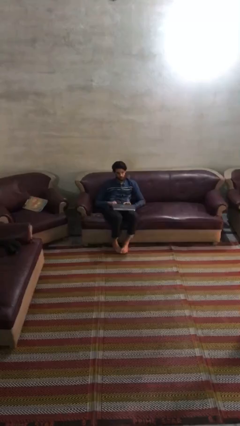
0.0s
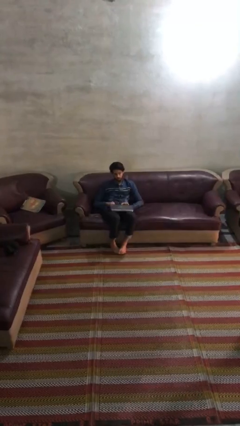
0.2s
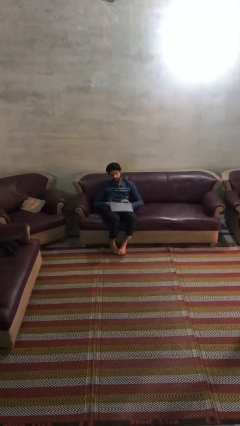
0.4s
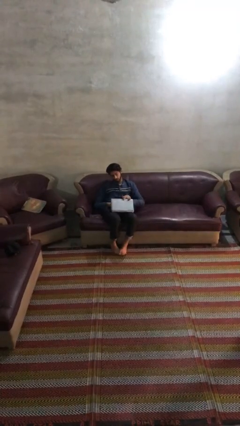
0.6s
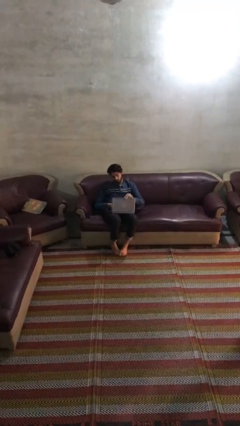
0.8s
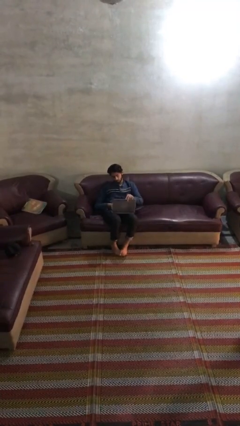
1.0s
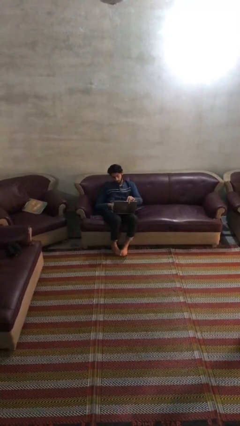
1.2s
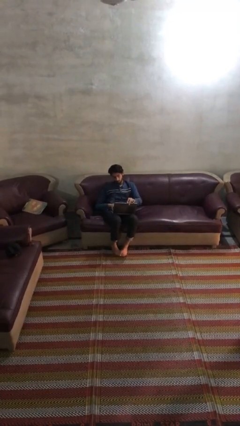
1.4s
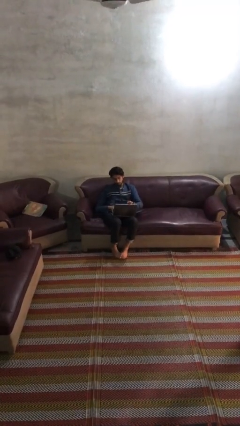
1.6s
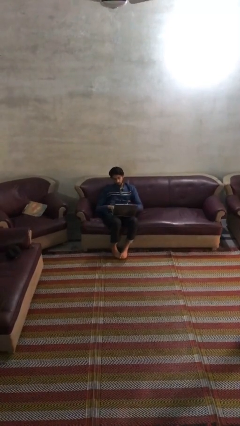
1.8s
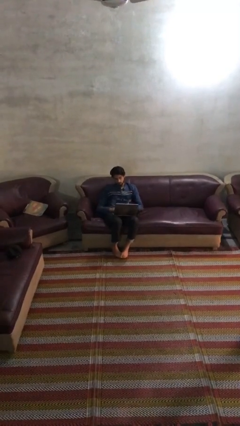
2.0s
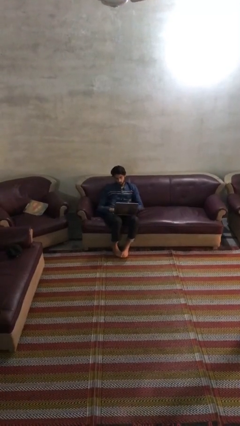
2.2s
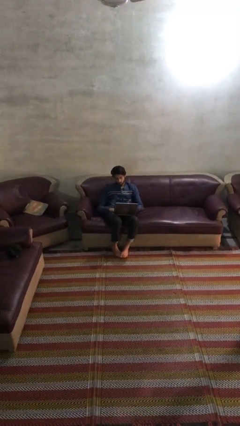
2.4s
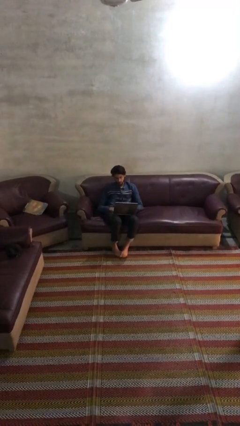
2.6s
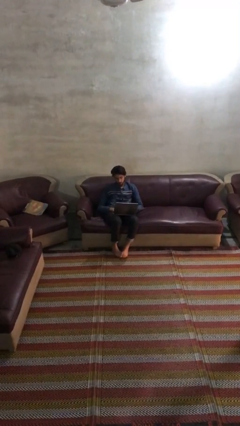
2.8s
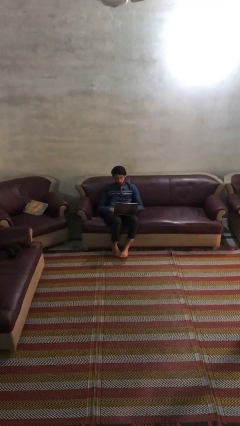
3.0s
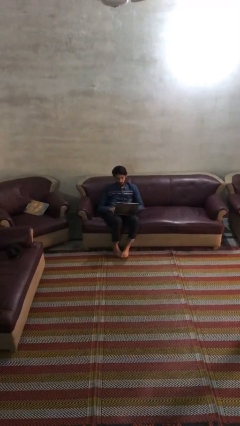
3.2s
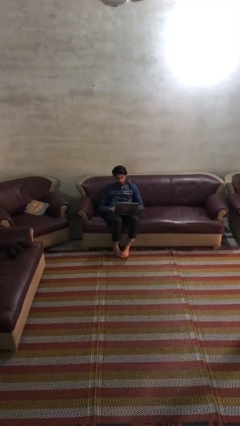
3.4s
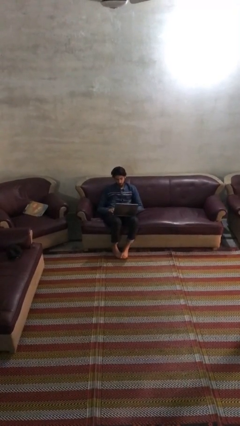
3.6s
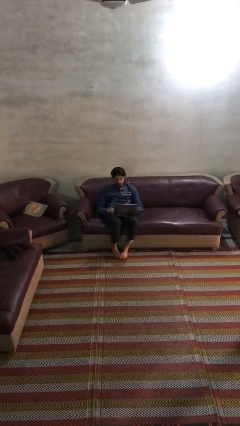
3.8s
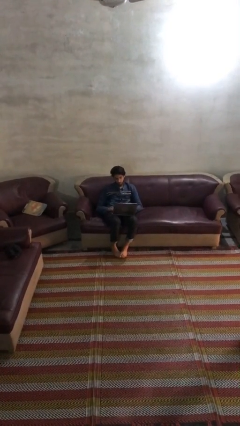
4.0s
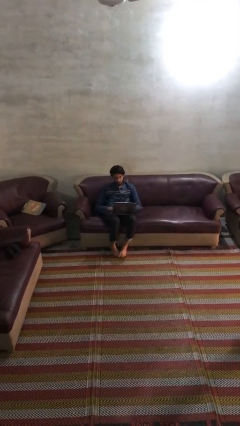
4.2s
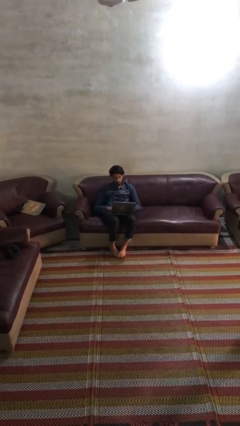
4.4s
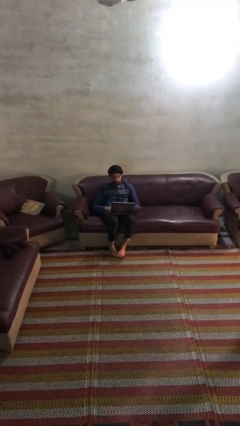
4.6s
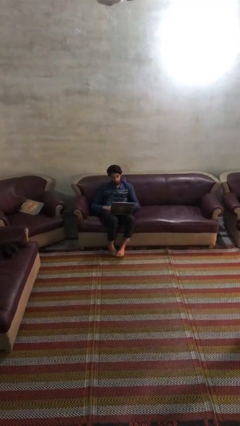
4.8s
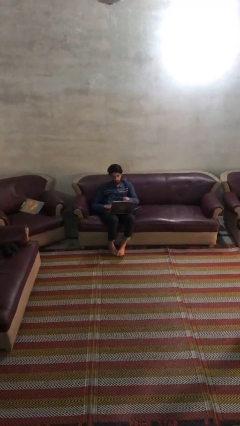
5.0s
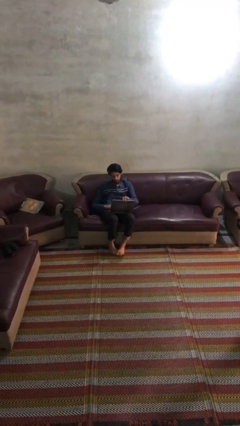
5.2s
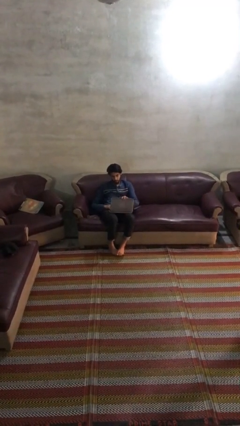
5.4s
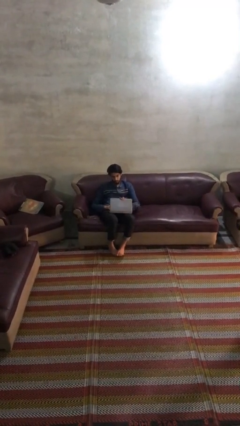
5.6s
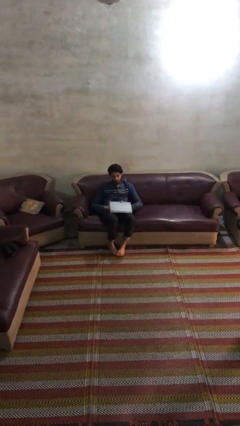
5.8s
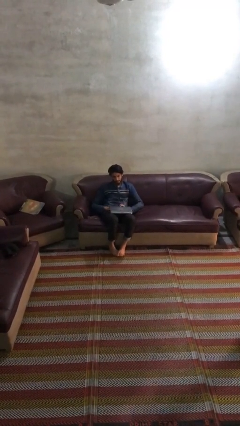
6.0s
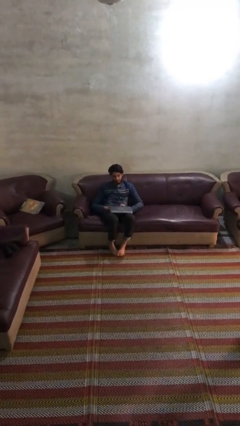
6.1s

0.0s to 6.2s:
person interacts with laptop

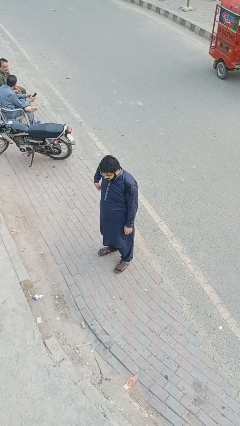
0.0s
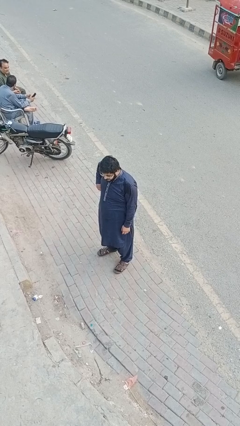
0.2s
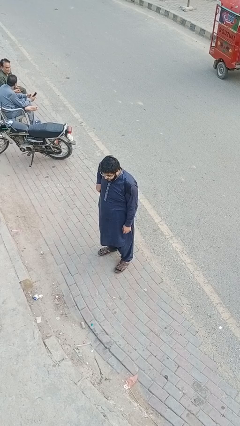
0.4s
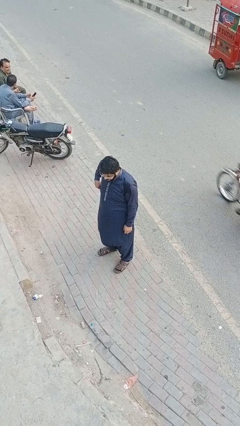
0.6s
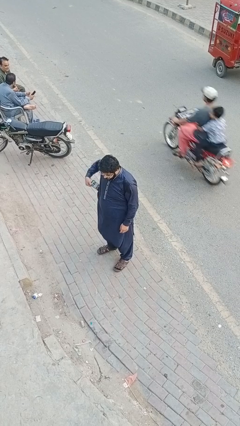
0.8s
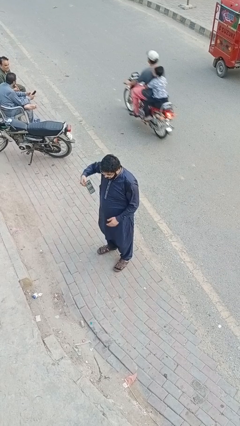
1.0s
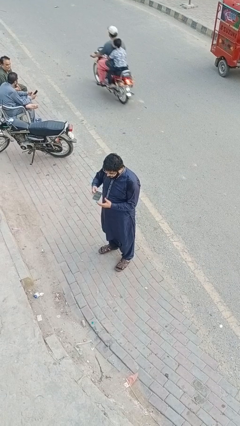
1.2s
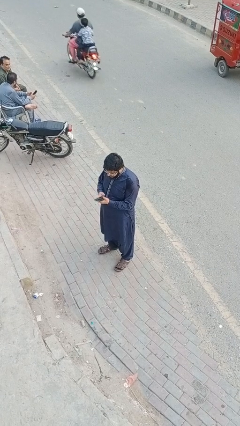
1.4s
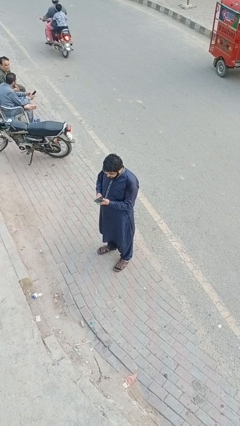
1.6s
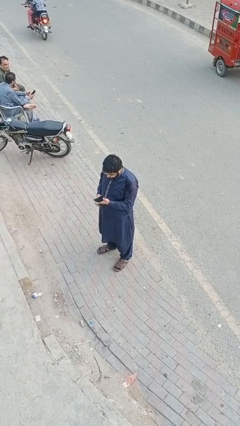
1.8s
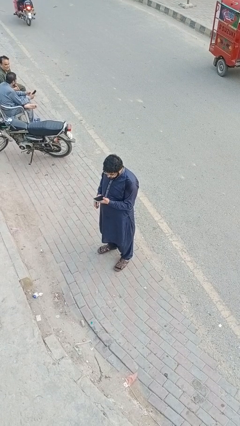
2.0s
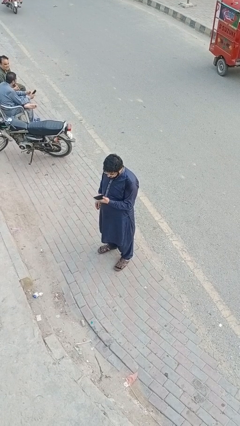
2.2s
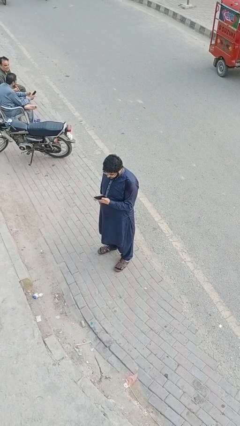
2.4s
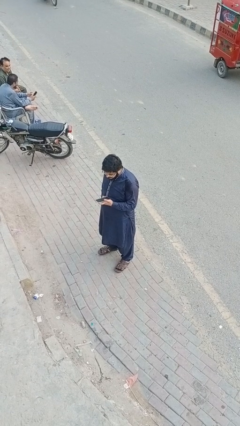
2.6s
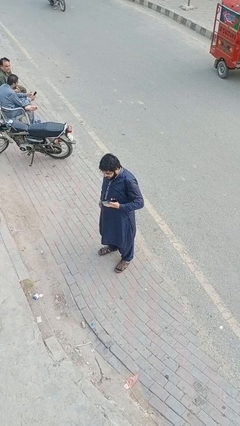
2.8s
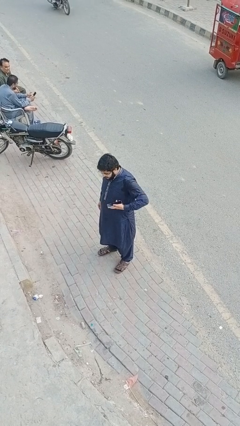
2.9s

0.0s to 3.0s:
person takes phone from pocket

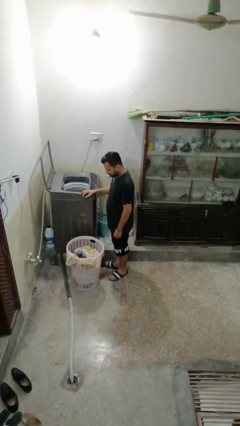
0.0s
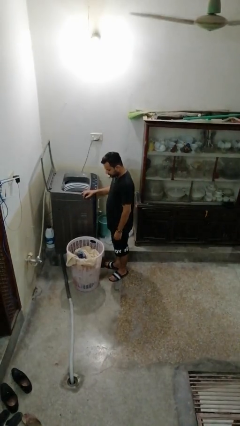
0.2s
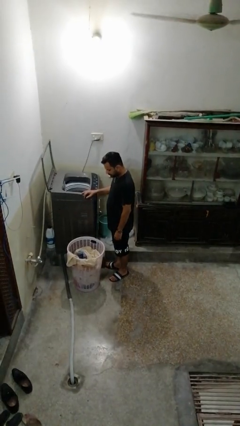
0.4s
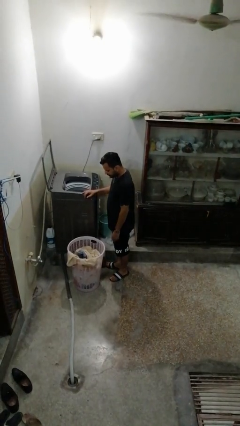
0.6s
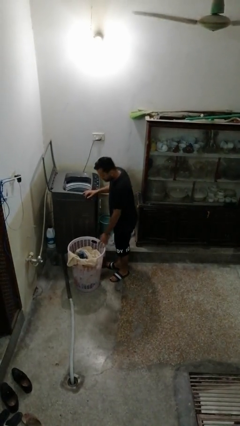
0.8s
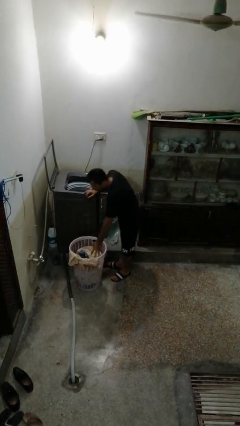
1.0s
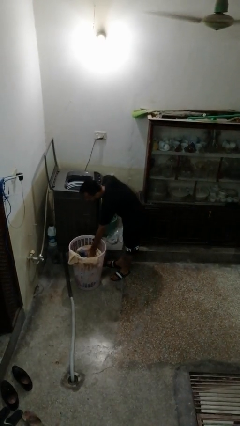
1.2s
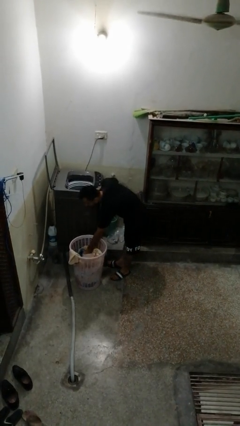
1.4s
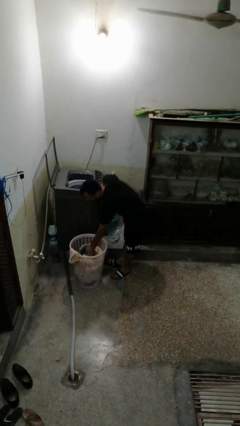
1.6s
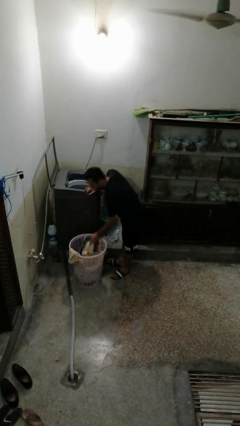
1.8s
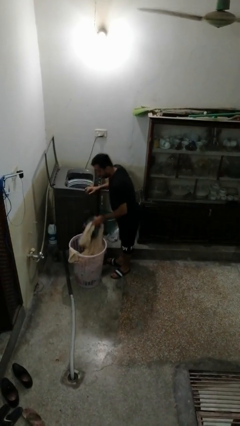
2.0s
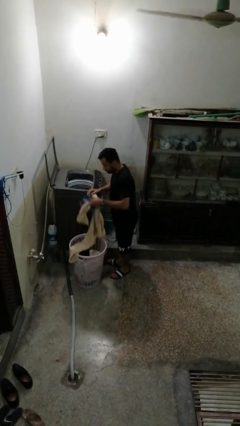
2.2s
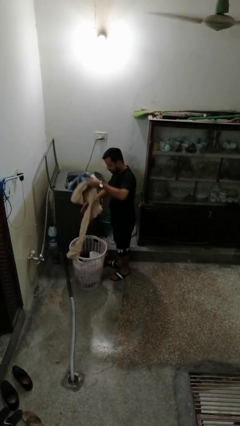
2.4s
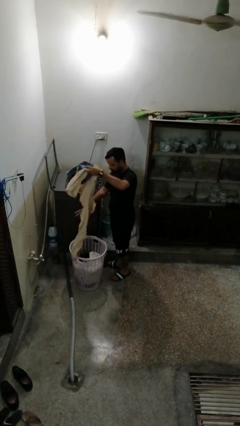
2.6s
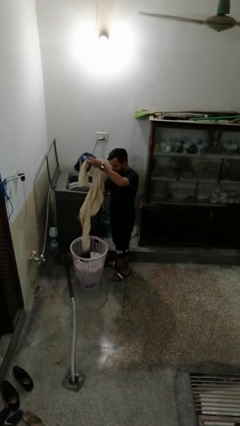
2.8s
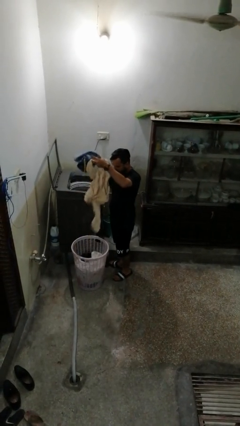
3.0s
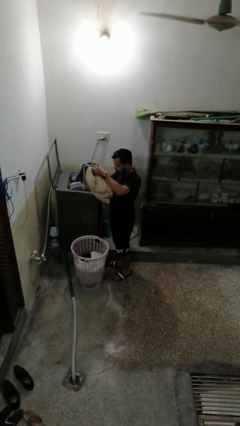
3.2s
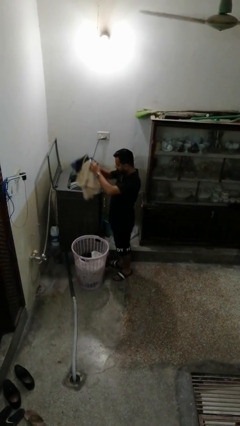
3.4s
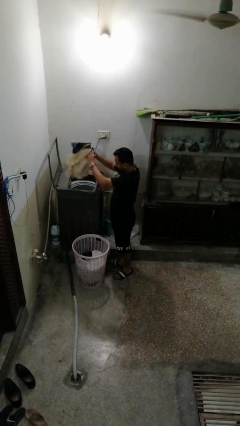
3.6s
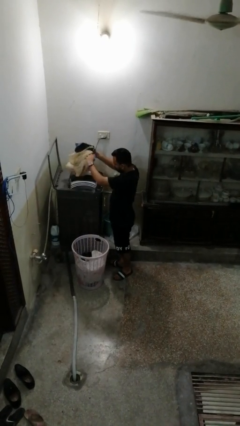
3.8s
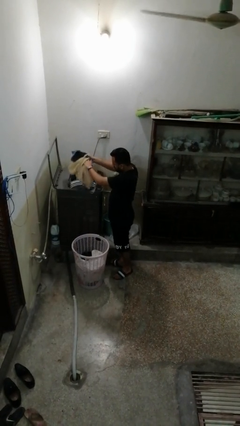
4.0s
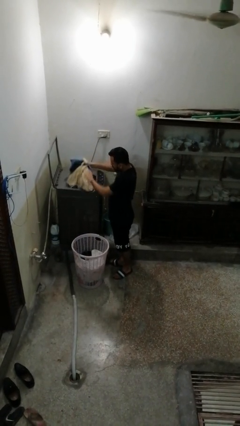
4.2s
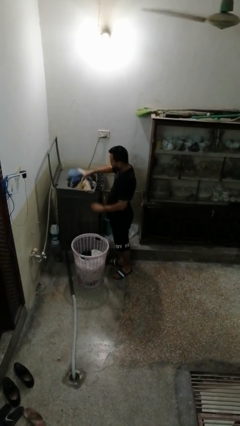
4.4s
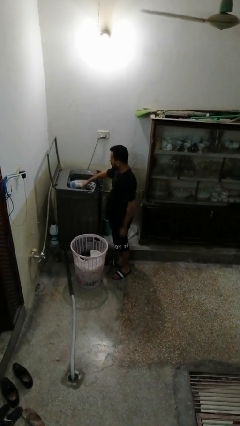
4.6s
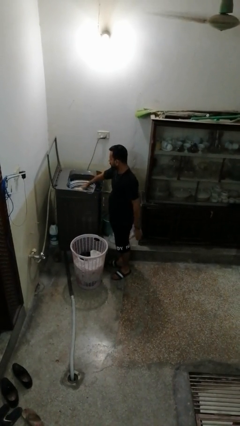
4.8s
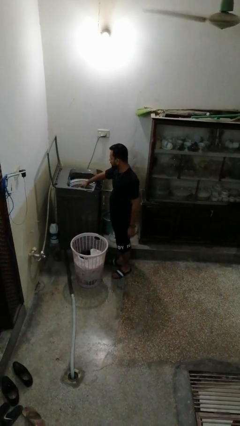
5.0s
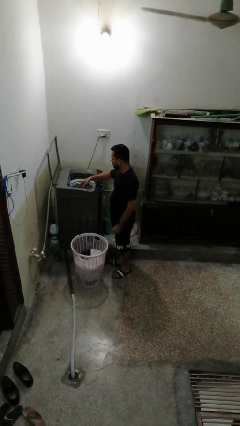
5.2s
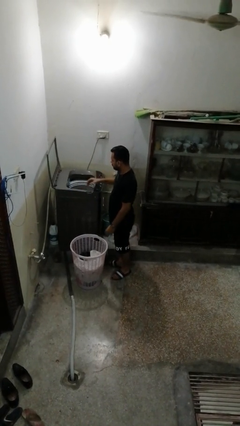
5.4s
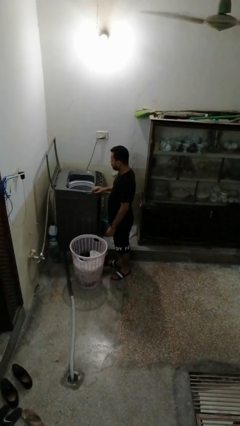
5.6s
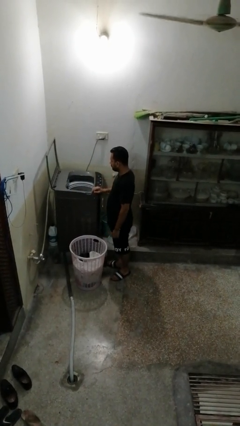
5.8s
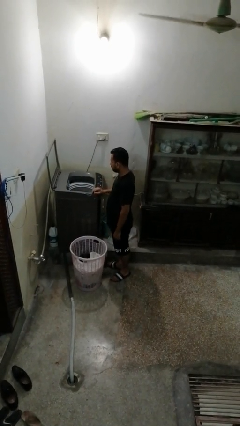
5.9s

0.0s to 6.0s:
person loads dryer

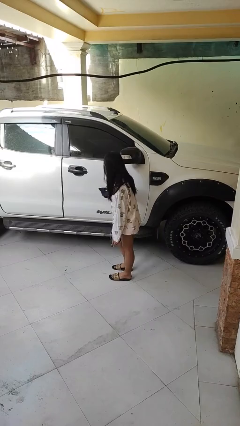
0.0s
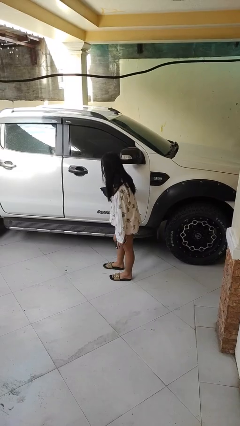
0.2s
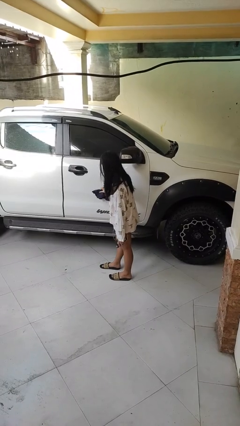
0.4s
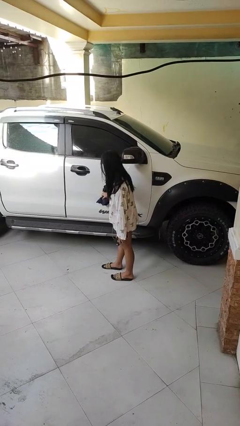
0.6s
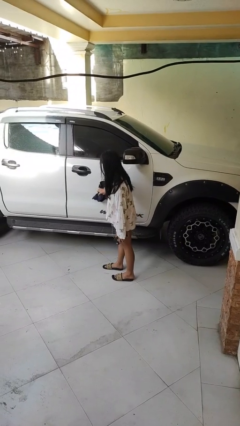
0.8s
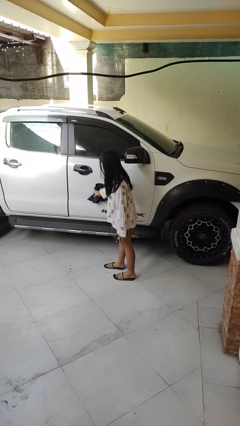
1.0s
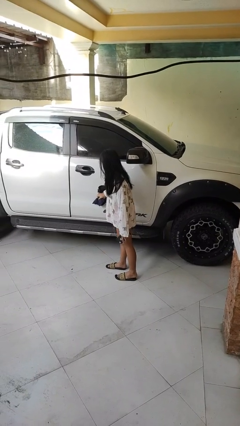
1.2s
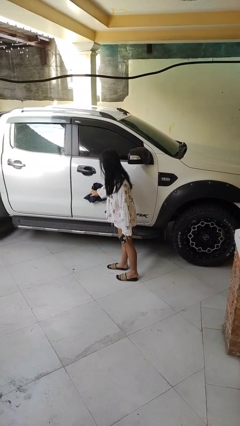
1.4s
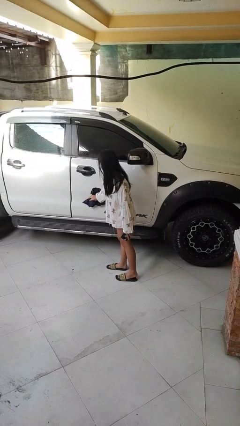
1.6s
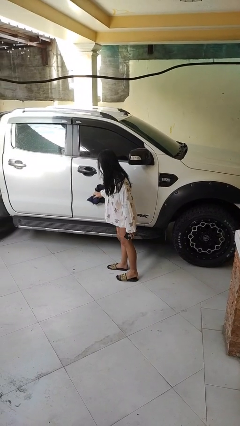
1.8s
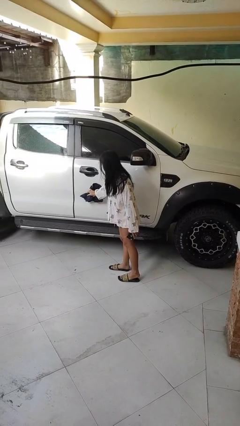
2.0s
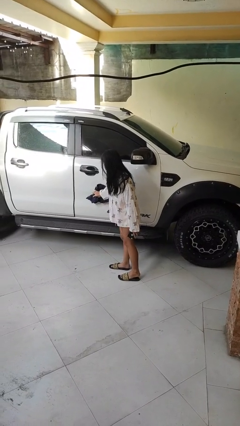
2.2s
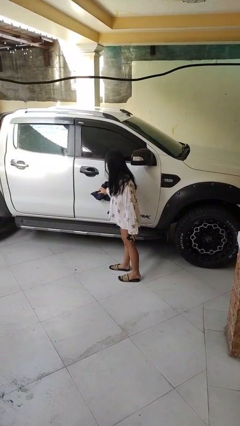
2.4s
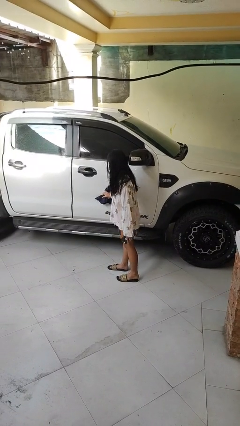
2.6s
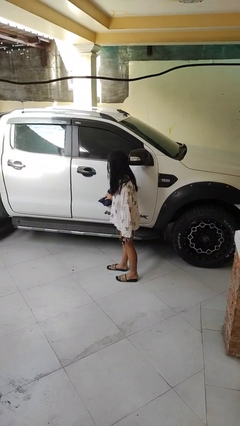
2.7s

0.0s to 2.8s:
person polishes car with rag

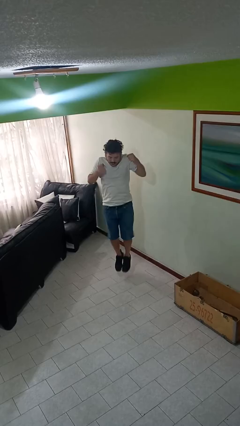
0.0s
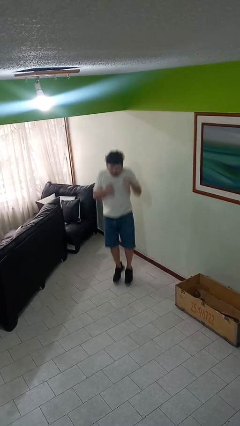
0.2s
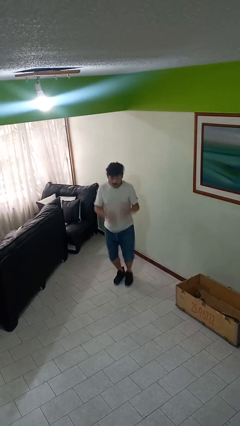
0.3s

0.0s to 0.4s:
person jumps
